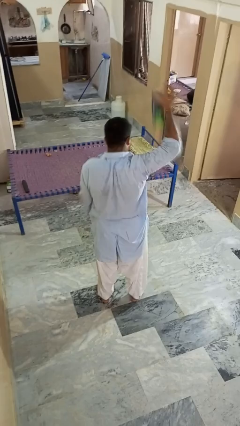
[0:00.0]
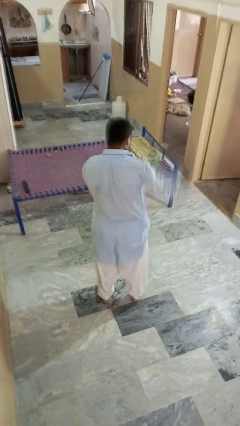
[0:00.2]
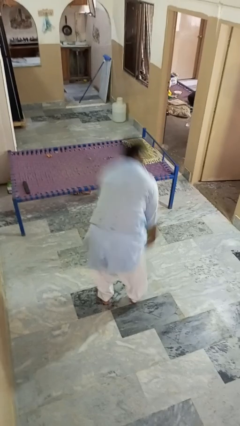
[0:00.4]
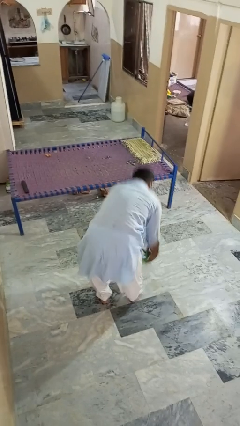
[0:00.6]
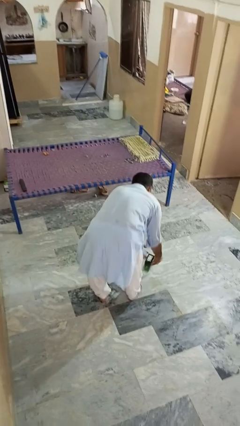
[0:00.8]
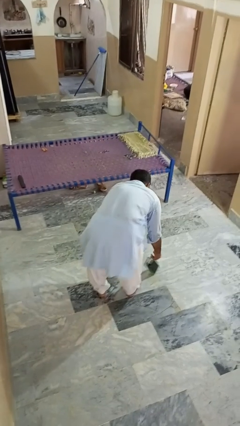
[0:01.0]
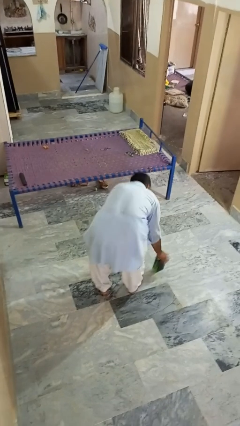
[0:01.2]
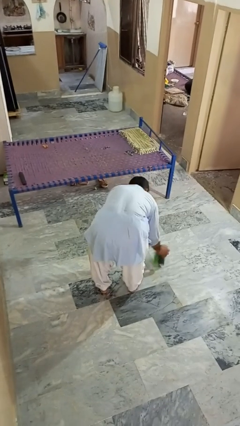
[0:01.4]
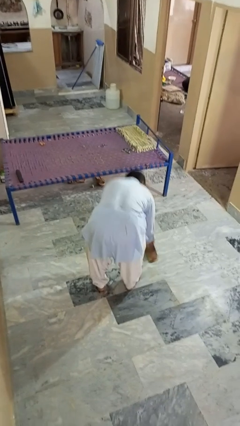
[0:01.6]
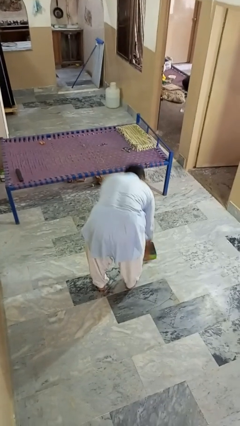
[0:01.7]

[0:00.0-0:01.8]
person catches dropped object

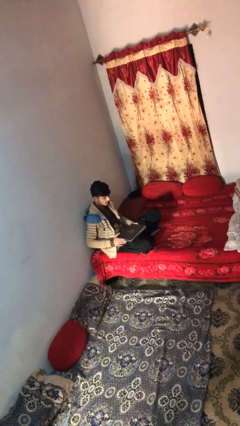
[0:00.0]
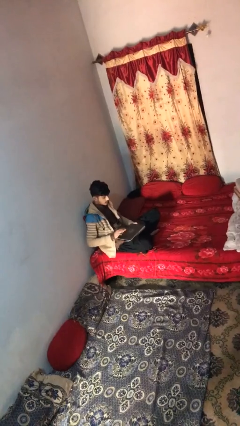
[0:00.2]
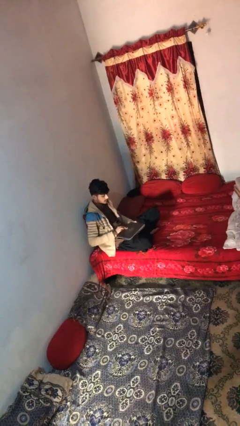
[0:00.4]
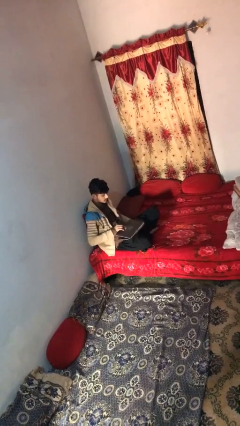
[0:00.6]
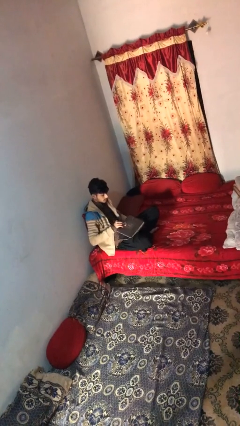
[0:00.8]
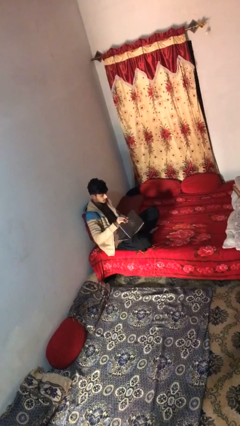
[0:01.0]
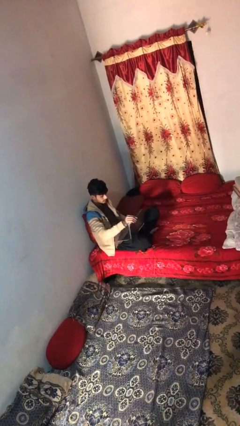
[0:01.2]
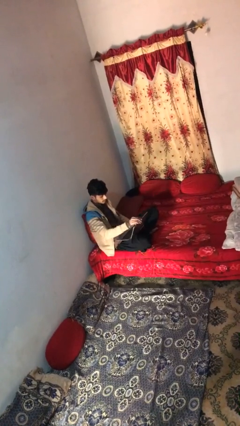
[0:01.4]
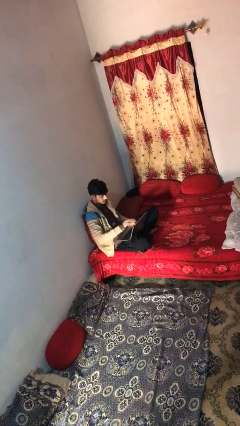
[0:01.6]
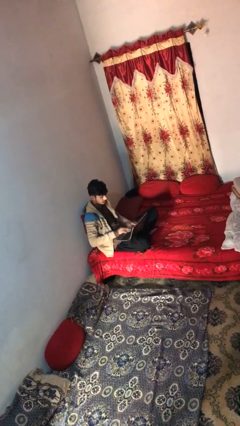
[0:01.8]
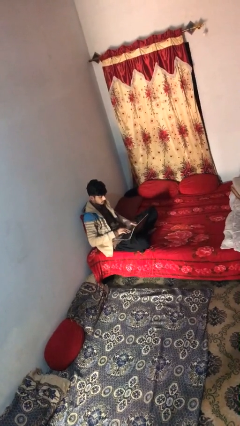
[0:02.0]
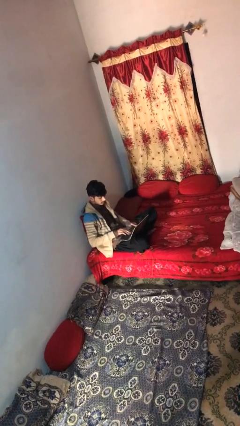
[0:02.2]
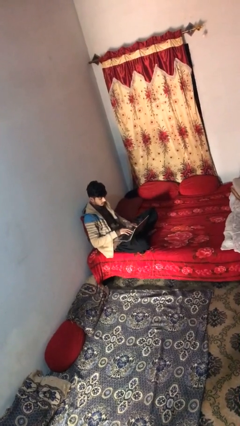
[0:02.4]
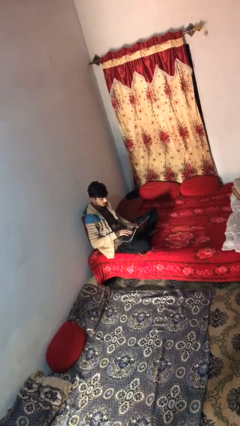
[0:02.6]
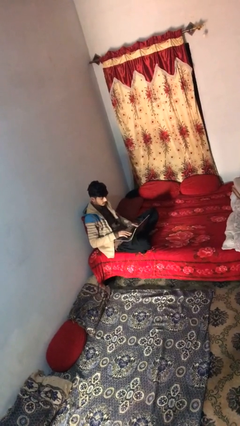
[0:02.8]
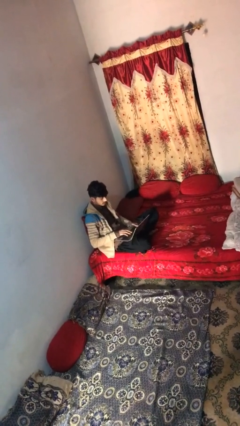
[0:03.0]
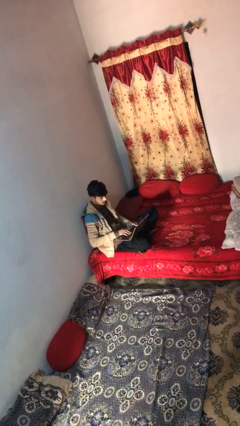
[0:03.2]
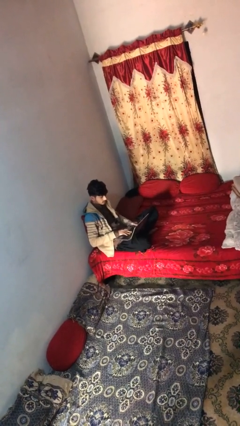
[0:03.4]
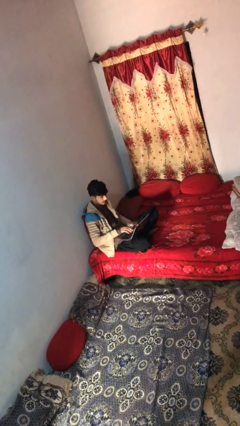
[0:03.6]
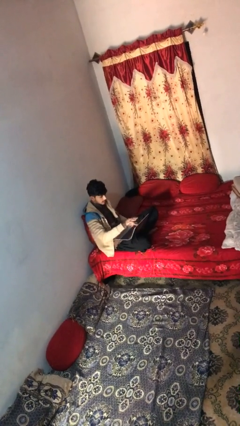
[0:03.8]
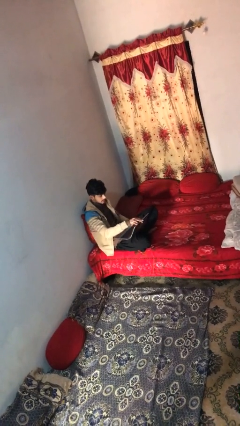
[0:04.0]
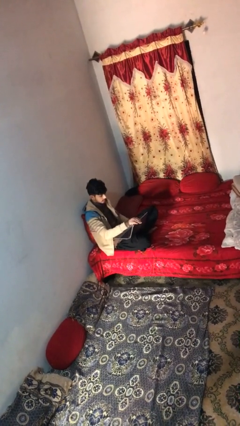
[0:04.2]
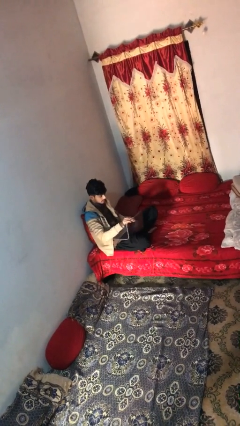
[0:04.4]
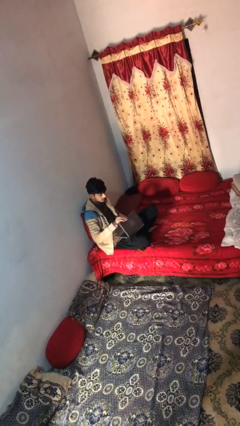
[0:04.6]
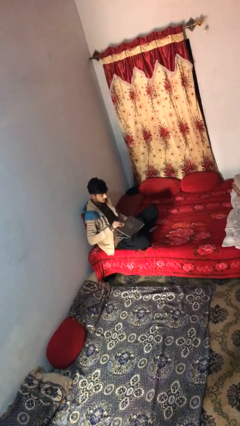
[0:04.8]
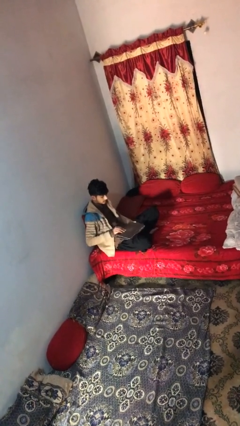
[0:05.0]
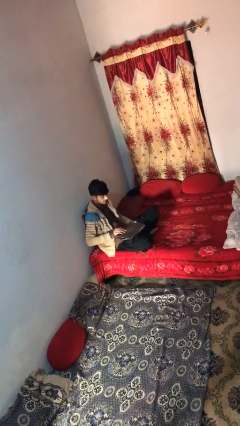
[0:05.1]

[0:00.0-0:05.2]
person interacts with laptop

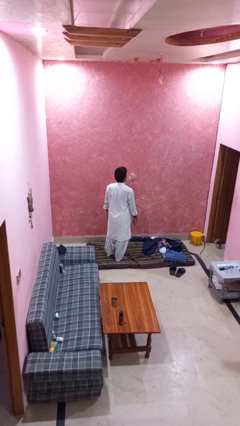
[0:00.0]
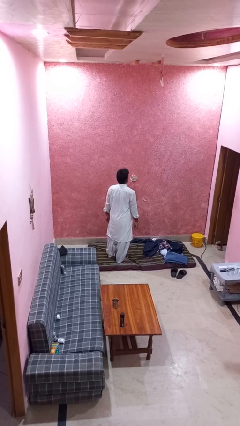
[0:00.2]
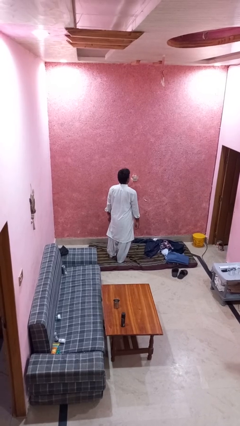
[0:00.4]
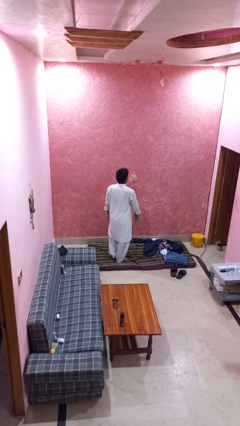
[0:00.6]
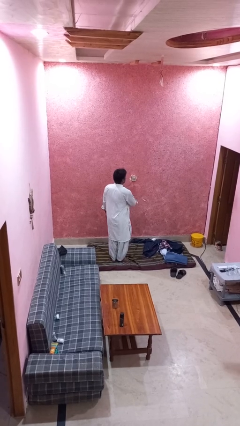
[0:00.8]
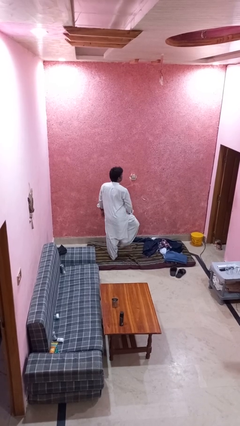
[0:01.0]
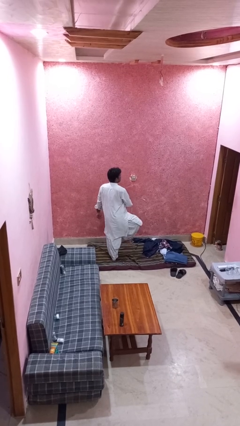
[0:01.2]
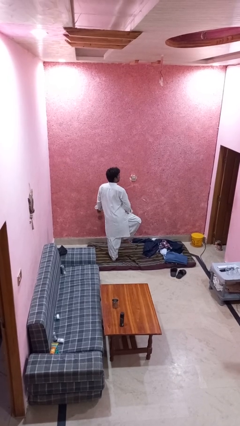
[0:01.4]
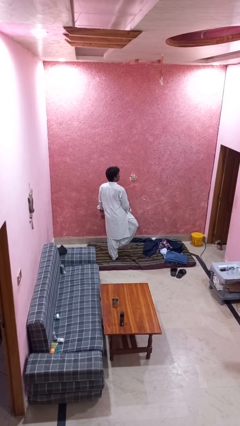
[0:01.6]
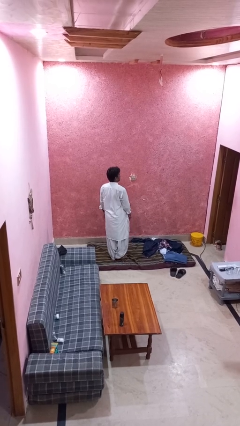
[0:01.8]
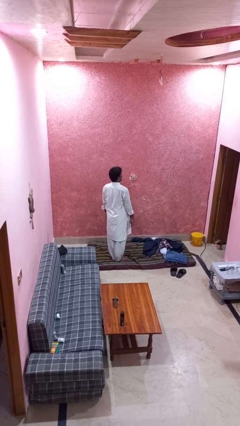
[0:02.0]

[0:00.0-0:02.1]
person slaps hands on thighs

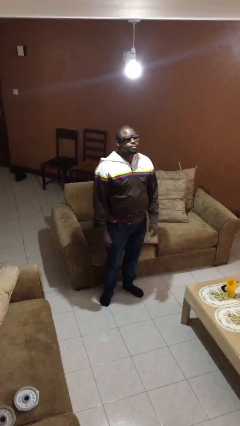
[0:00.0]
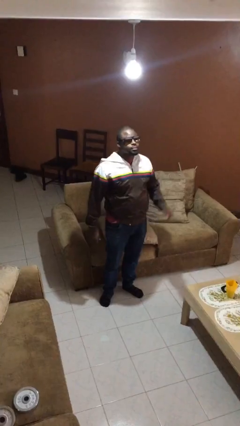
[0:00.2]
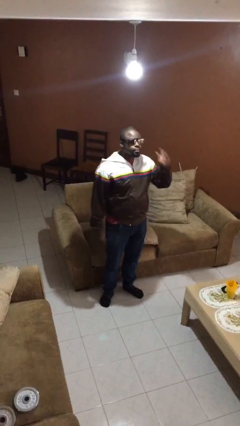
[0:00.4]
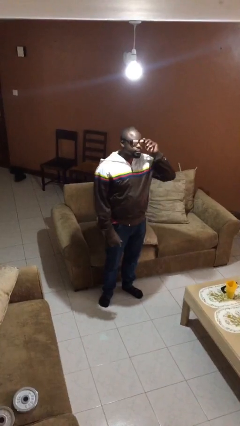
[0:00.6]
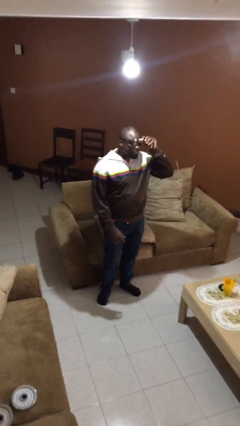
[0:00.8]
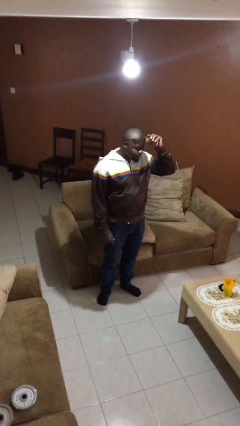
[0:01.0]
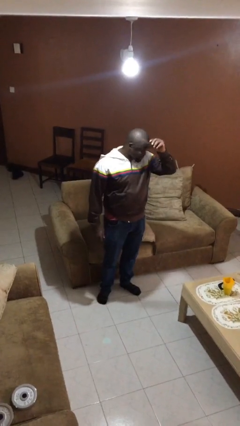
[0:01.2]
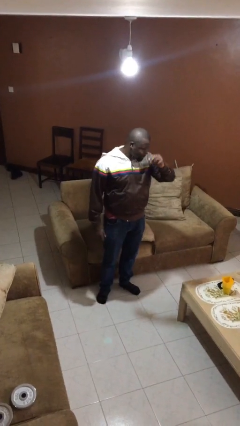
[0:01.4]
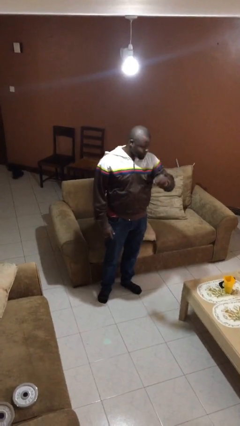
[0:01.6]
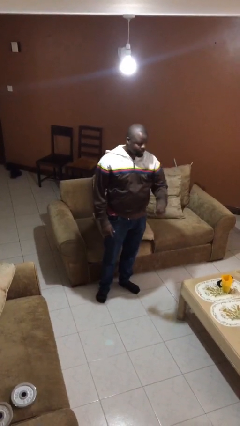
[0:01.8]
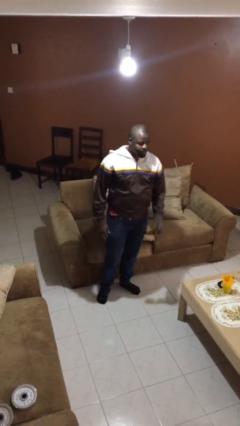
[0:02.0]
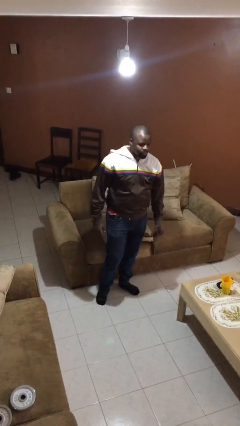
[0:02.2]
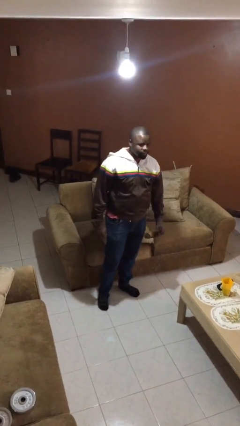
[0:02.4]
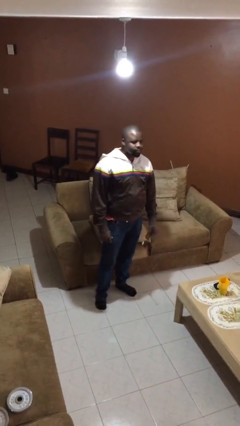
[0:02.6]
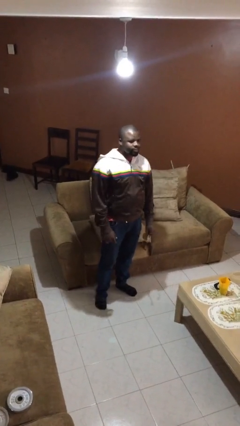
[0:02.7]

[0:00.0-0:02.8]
person takes off sunglasses

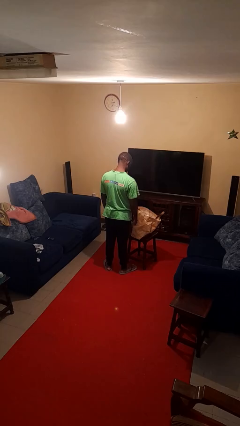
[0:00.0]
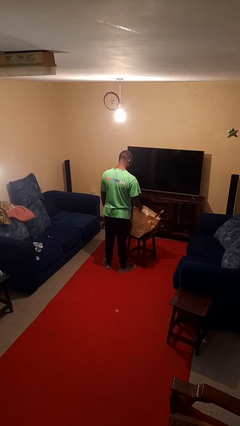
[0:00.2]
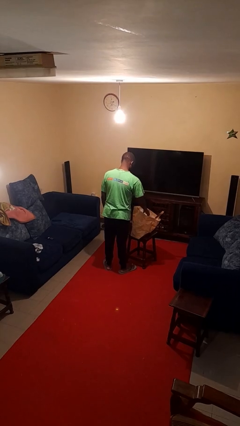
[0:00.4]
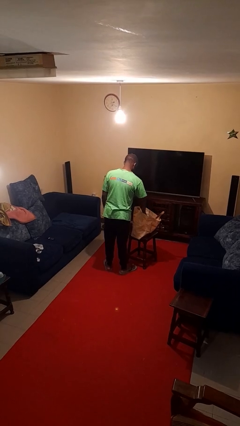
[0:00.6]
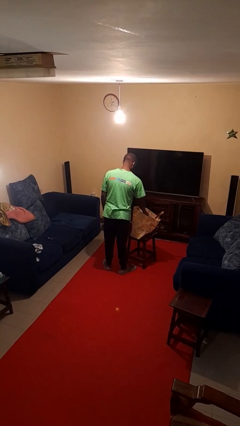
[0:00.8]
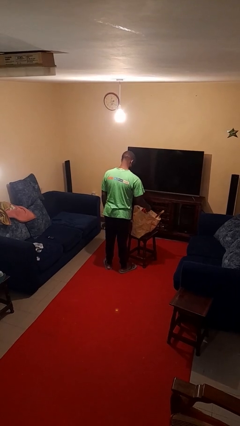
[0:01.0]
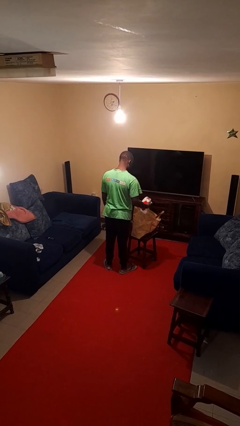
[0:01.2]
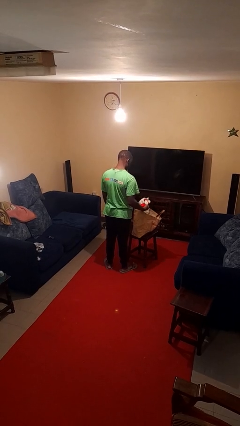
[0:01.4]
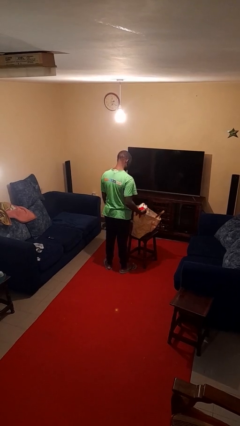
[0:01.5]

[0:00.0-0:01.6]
person takes object from bag

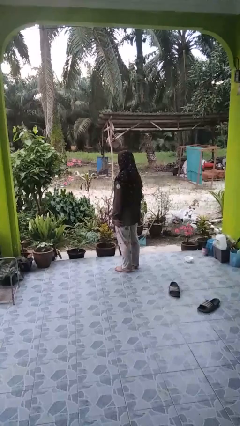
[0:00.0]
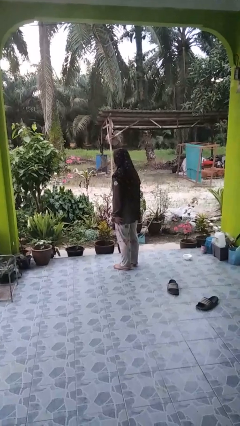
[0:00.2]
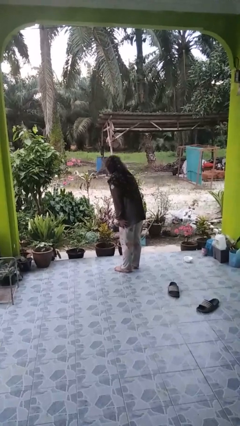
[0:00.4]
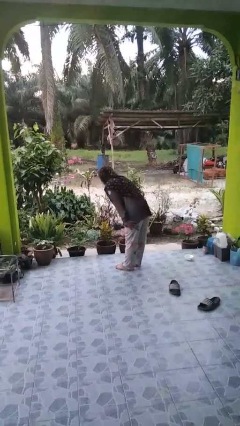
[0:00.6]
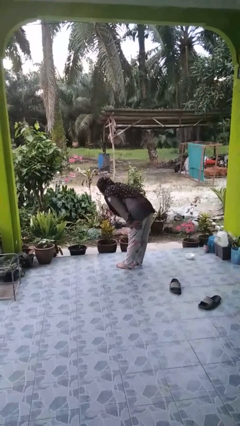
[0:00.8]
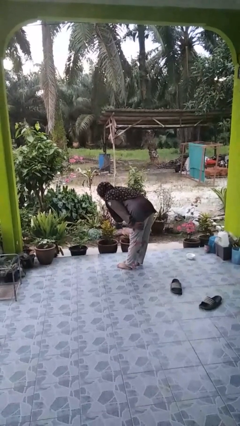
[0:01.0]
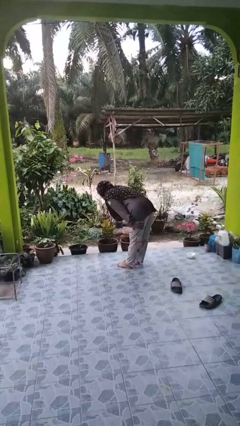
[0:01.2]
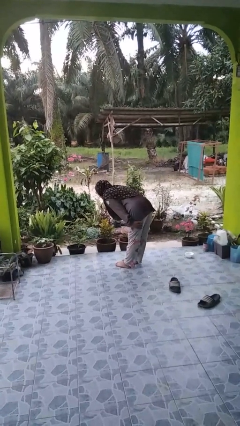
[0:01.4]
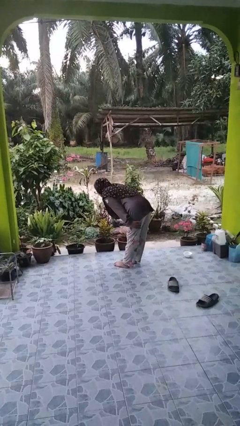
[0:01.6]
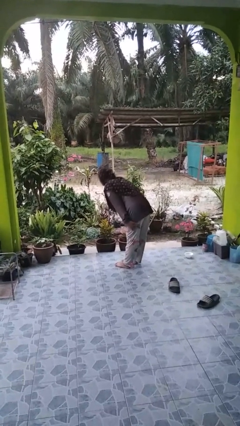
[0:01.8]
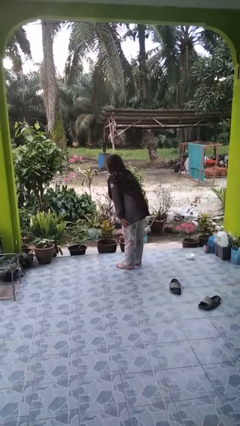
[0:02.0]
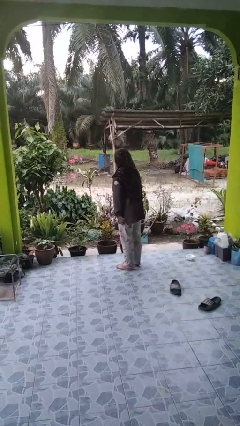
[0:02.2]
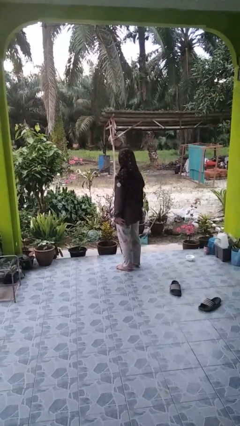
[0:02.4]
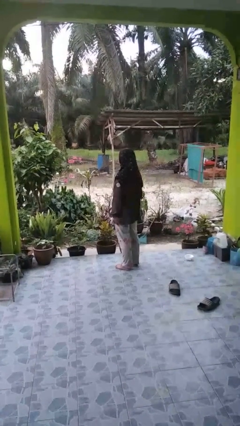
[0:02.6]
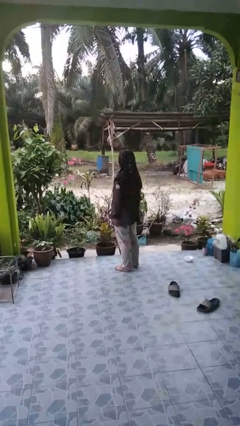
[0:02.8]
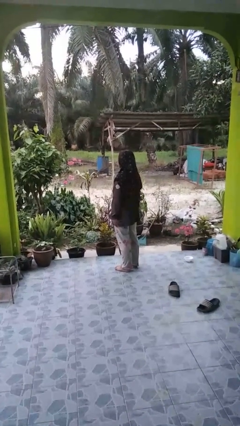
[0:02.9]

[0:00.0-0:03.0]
person bows

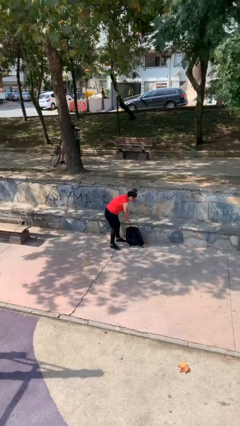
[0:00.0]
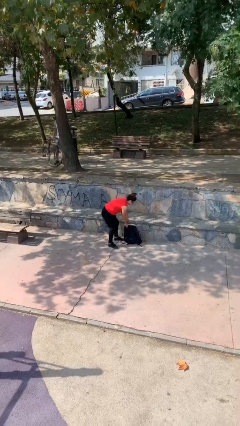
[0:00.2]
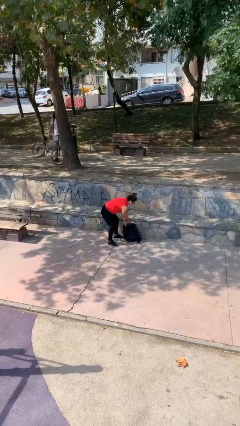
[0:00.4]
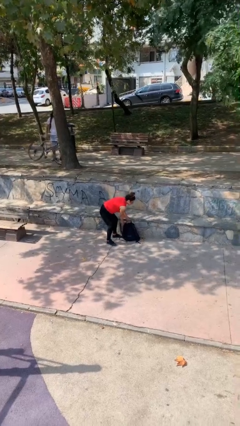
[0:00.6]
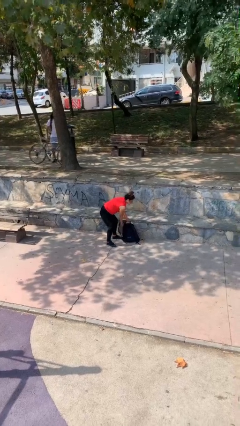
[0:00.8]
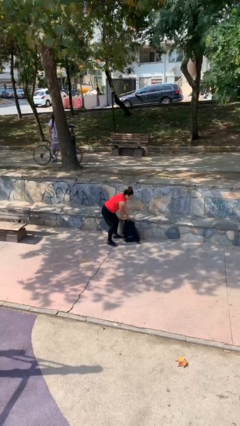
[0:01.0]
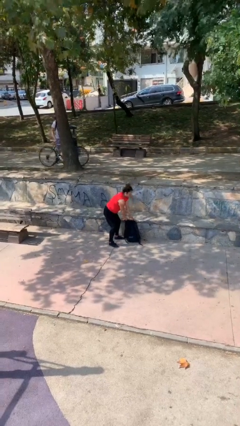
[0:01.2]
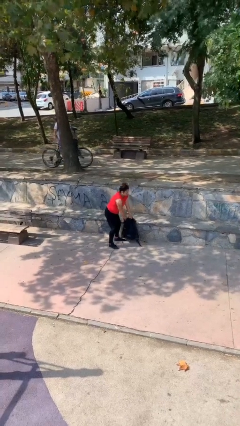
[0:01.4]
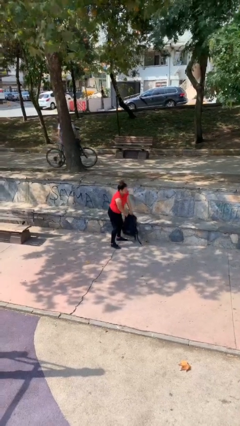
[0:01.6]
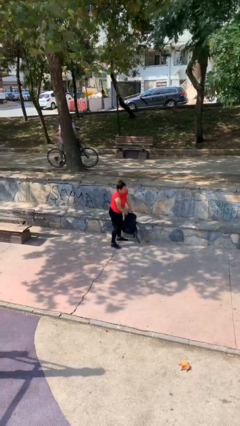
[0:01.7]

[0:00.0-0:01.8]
person picks up object from floor
